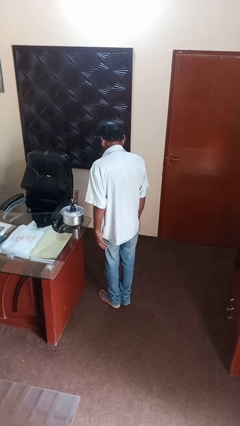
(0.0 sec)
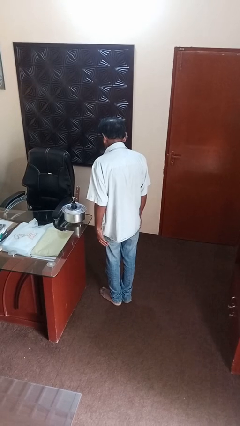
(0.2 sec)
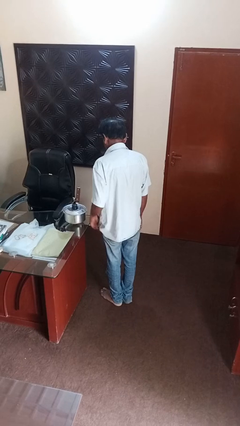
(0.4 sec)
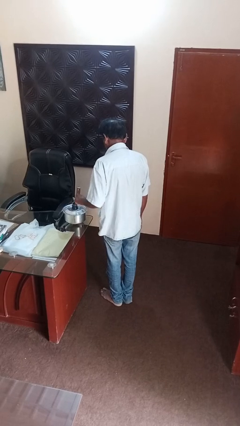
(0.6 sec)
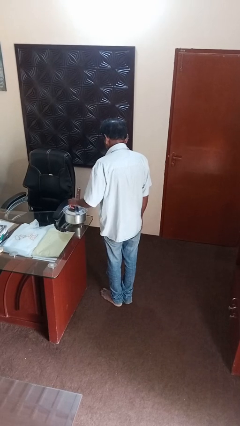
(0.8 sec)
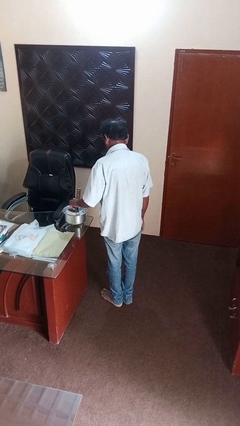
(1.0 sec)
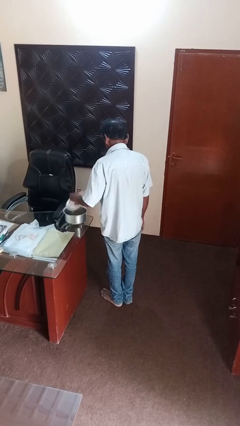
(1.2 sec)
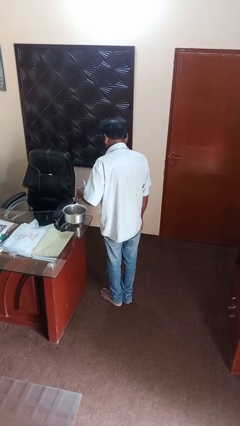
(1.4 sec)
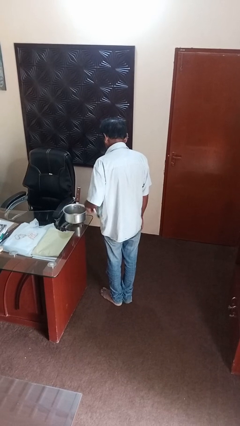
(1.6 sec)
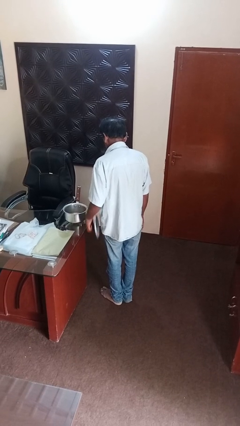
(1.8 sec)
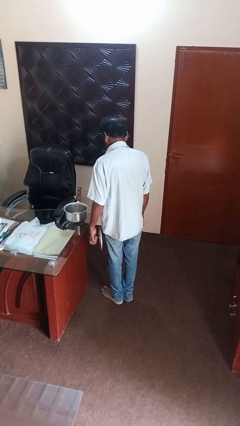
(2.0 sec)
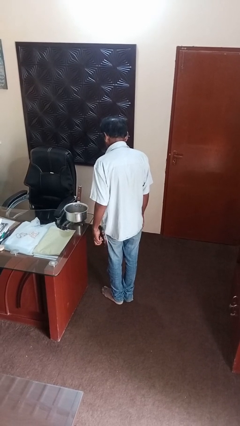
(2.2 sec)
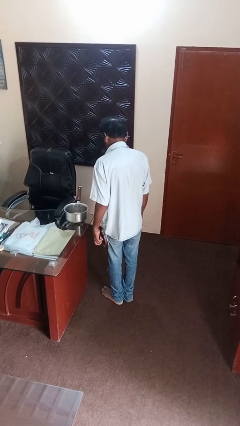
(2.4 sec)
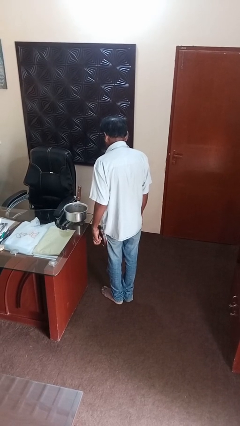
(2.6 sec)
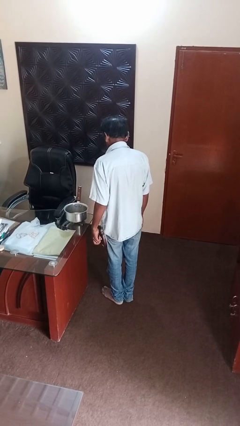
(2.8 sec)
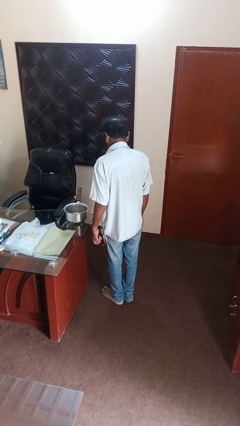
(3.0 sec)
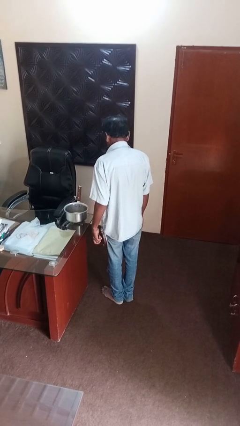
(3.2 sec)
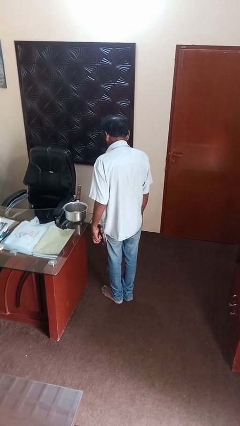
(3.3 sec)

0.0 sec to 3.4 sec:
person opens jar

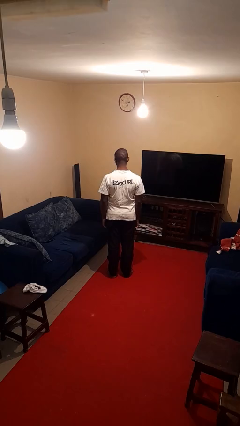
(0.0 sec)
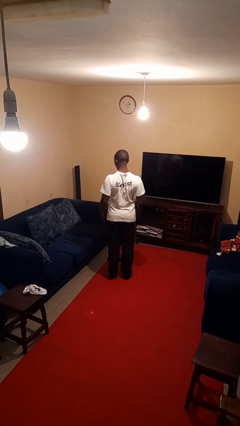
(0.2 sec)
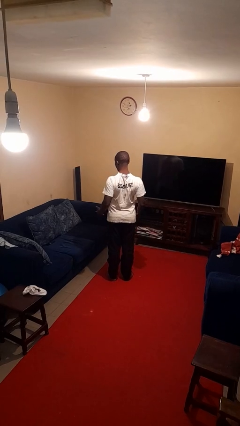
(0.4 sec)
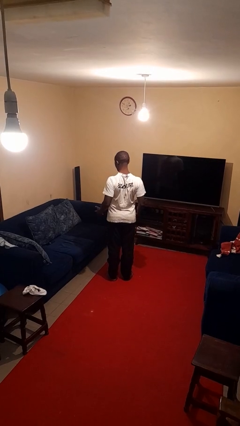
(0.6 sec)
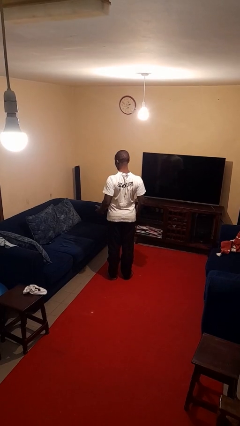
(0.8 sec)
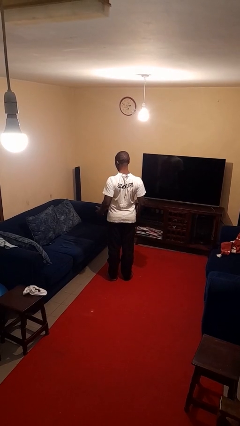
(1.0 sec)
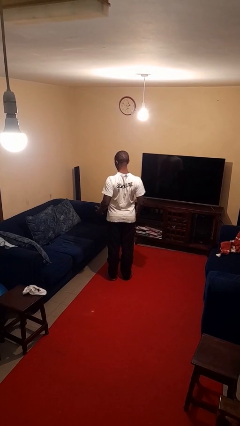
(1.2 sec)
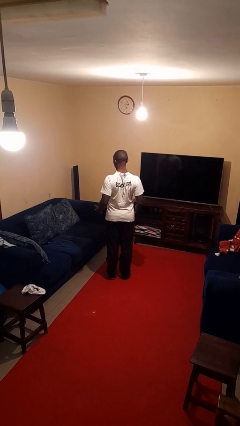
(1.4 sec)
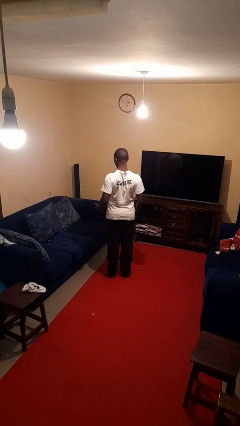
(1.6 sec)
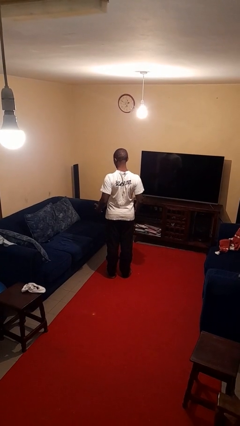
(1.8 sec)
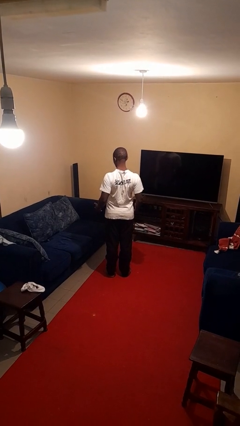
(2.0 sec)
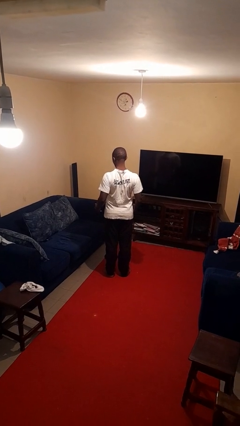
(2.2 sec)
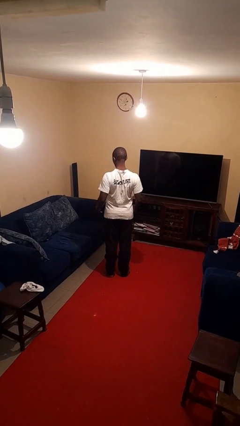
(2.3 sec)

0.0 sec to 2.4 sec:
person shrugs

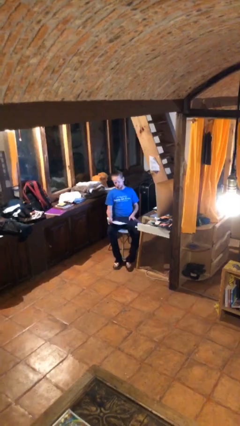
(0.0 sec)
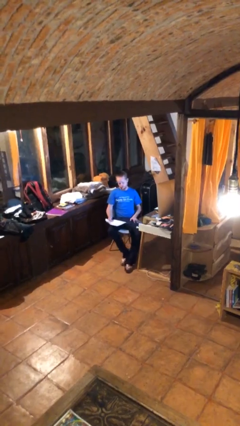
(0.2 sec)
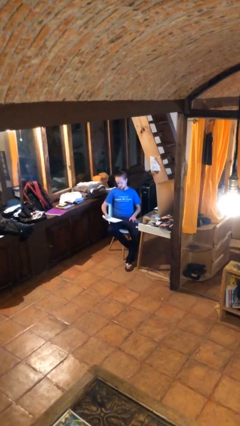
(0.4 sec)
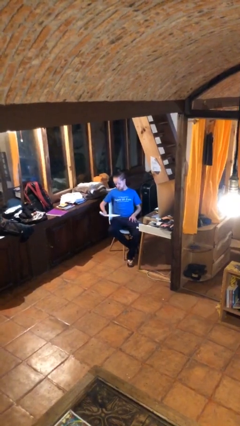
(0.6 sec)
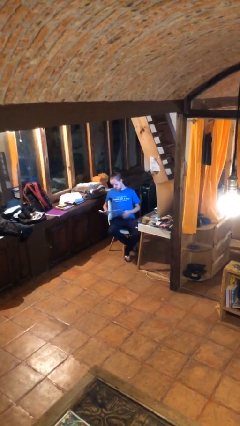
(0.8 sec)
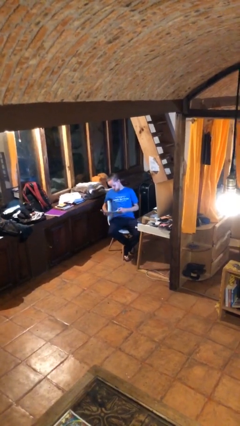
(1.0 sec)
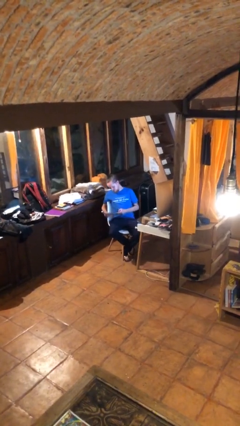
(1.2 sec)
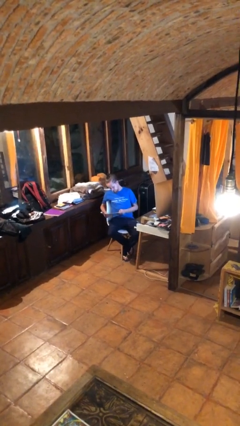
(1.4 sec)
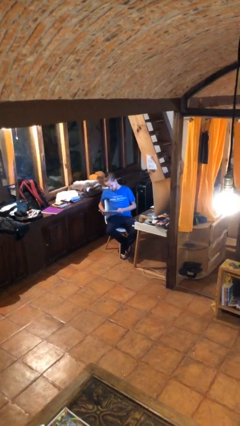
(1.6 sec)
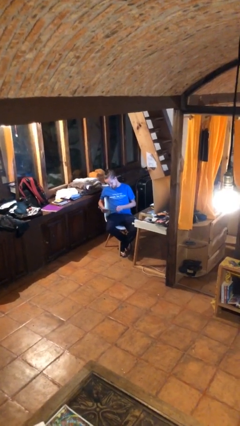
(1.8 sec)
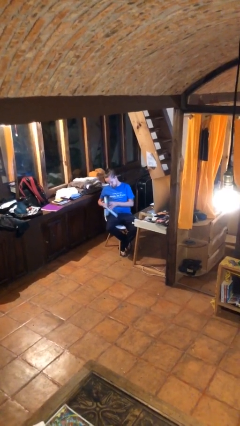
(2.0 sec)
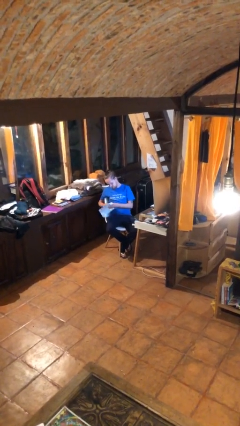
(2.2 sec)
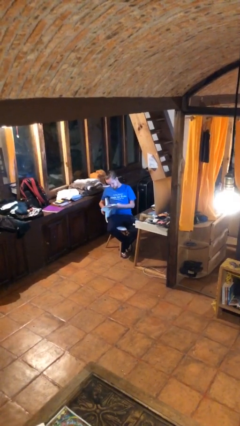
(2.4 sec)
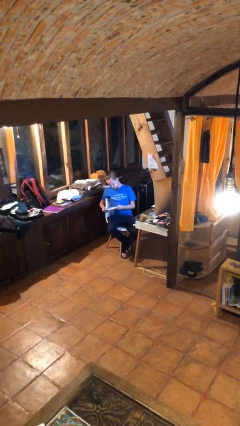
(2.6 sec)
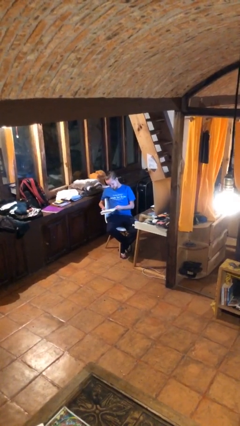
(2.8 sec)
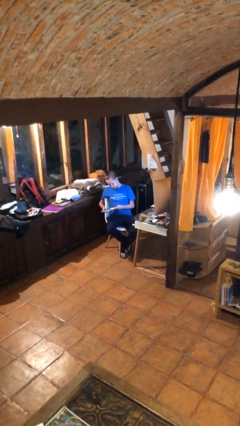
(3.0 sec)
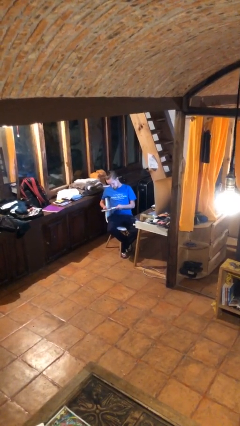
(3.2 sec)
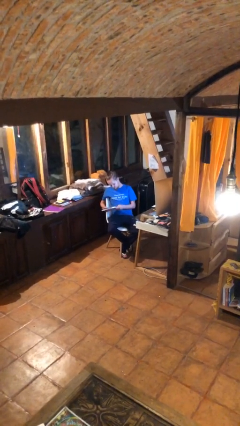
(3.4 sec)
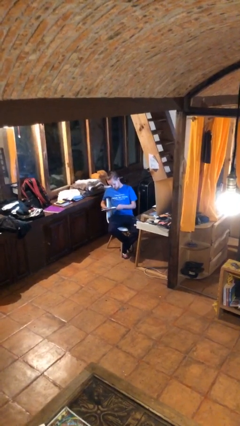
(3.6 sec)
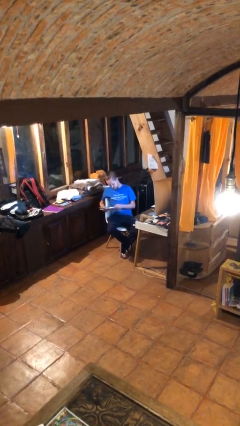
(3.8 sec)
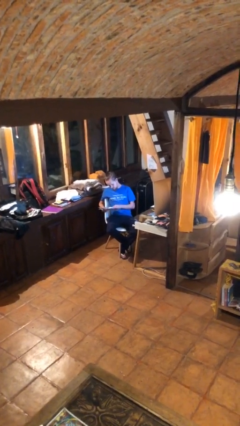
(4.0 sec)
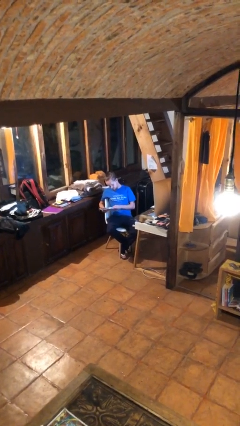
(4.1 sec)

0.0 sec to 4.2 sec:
person reads document

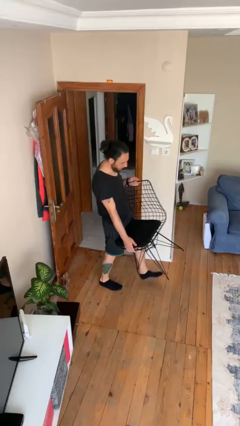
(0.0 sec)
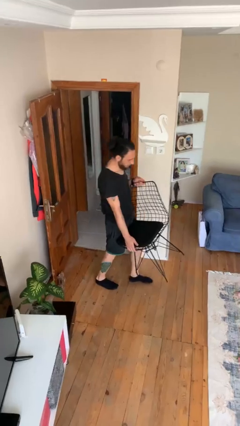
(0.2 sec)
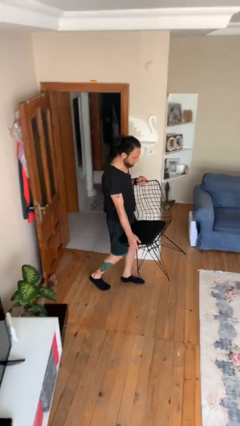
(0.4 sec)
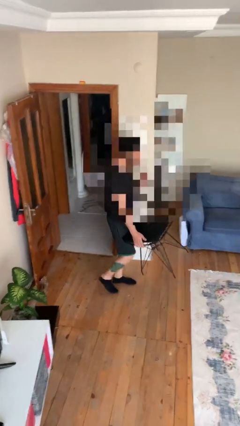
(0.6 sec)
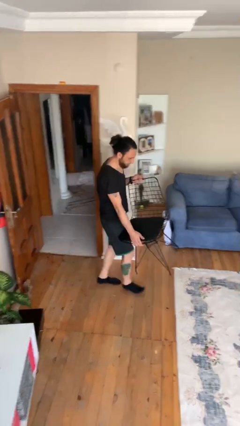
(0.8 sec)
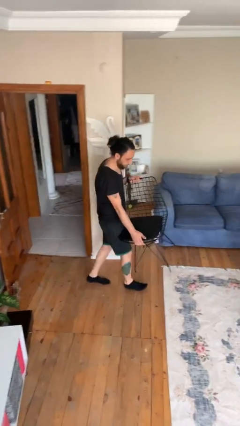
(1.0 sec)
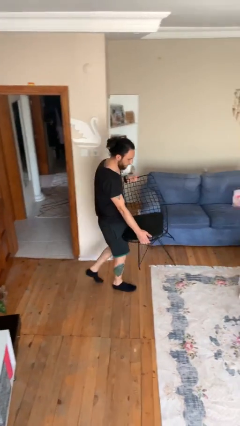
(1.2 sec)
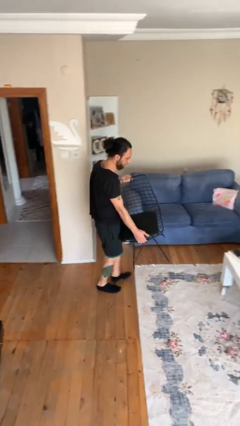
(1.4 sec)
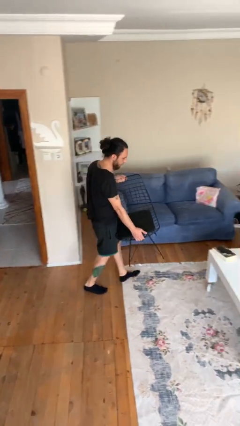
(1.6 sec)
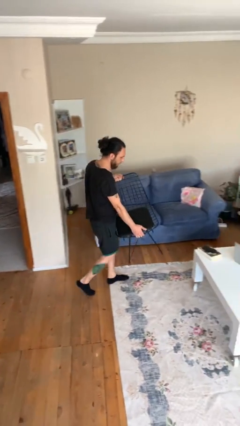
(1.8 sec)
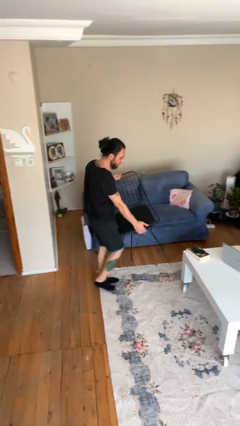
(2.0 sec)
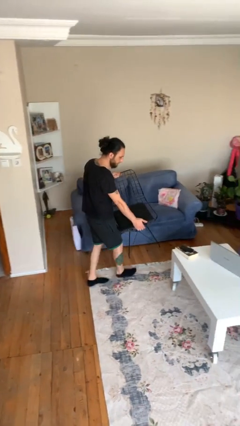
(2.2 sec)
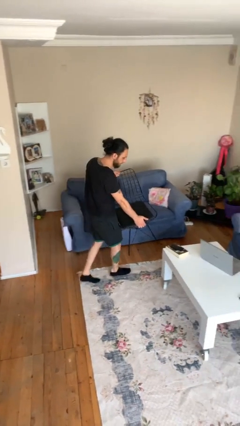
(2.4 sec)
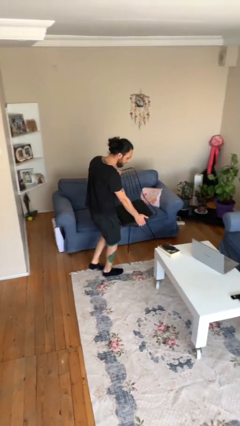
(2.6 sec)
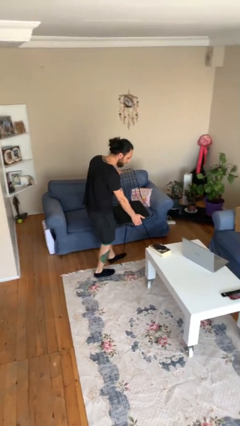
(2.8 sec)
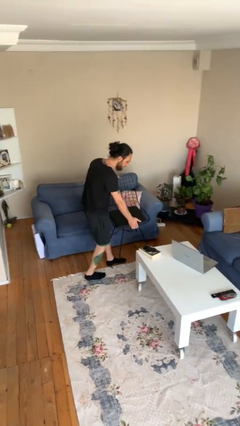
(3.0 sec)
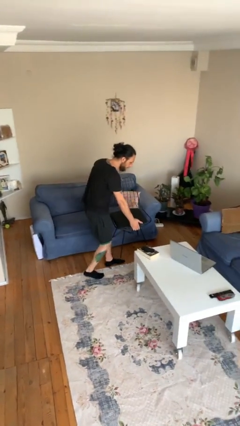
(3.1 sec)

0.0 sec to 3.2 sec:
person carries heavy object

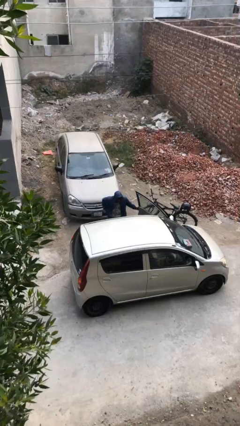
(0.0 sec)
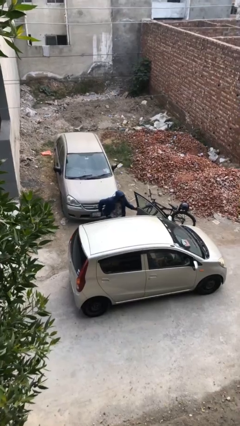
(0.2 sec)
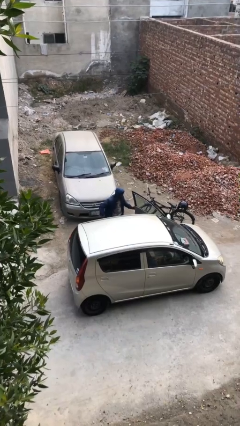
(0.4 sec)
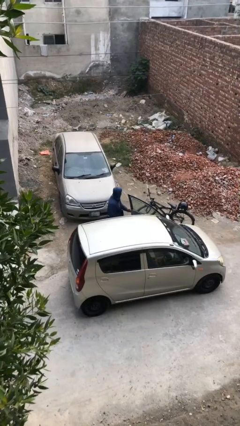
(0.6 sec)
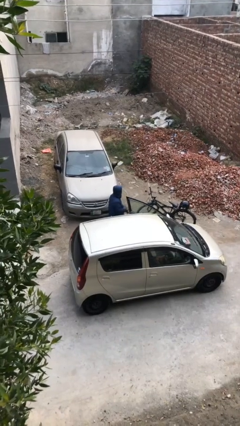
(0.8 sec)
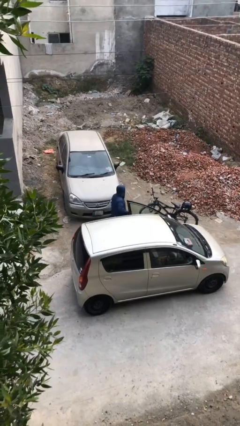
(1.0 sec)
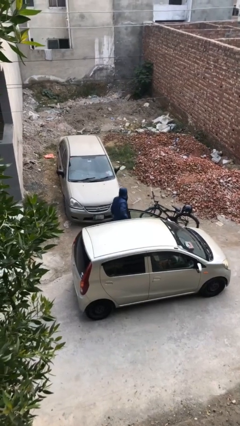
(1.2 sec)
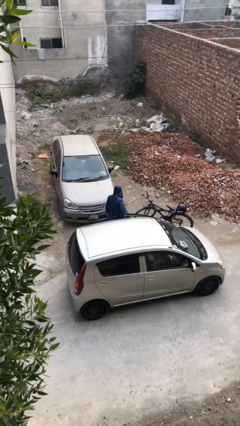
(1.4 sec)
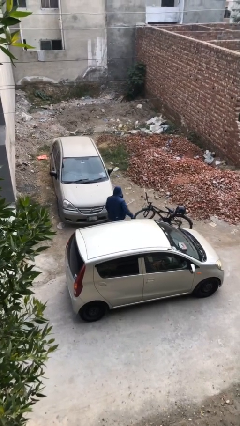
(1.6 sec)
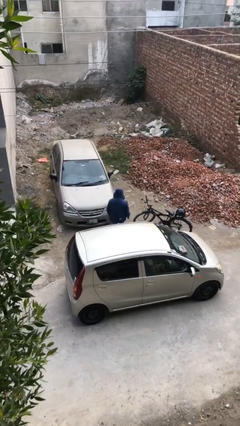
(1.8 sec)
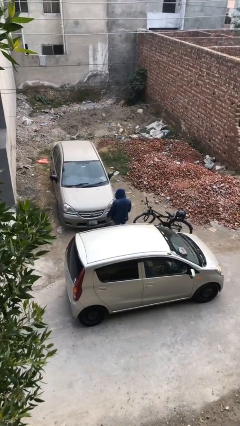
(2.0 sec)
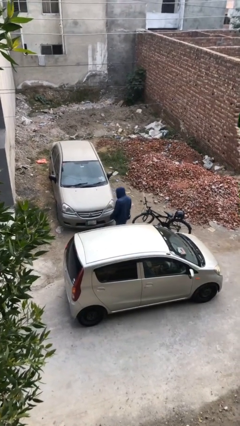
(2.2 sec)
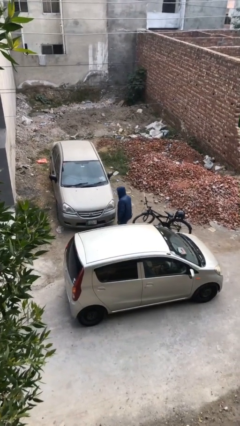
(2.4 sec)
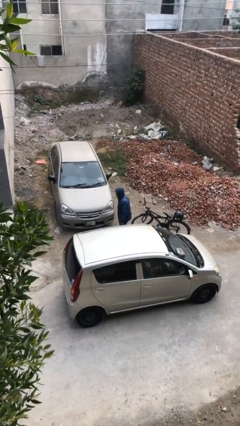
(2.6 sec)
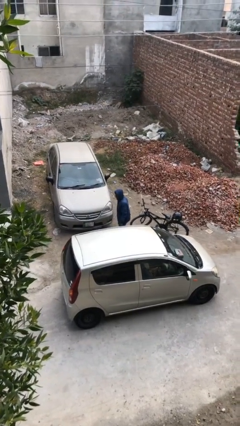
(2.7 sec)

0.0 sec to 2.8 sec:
person closes car door

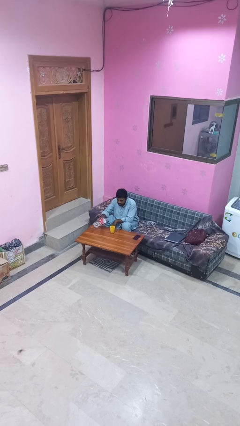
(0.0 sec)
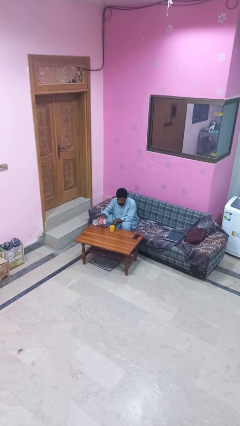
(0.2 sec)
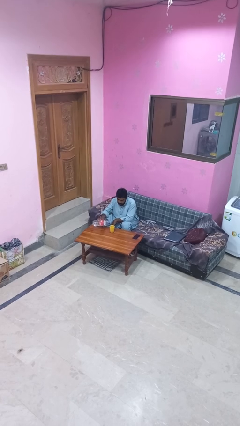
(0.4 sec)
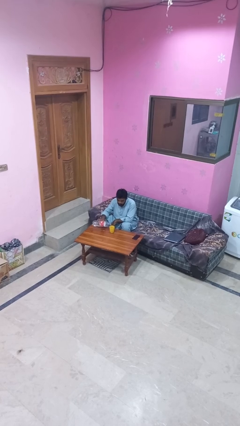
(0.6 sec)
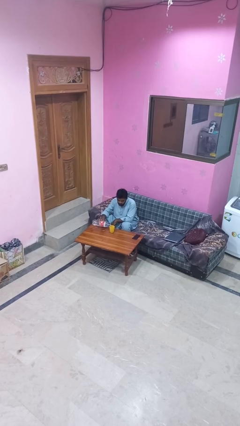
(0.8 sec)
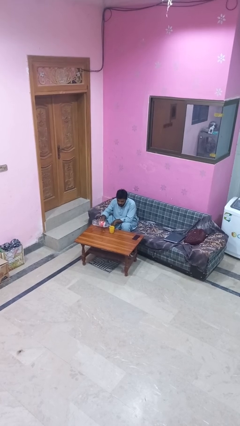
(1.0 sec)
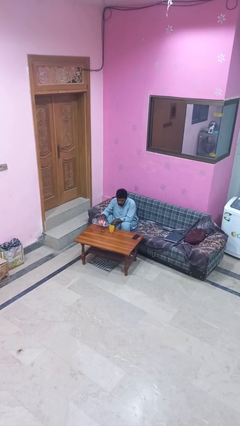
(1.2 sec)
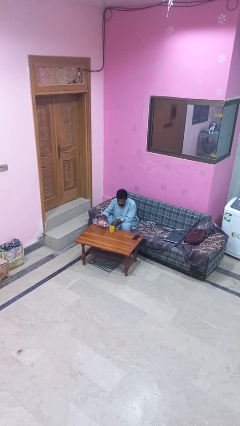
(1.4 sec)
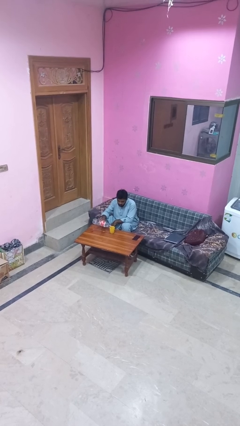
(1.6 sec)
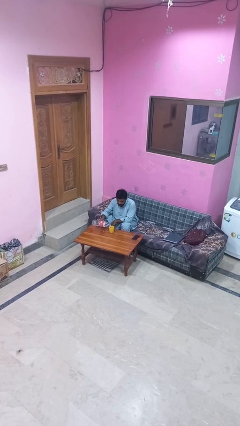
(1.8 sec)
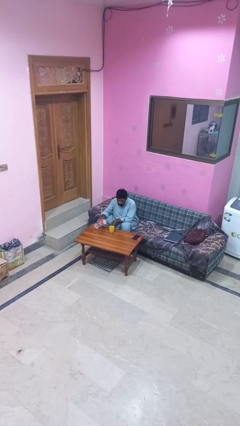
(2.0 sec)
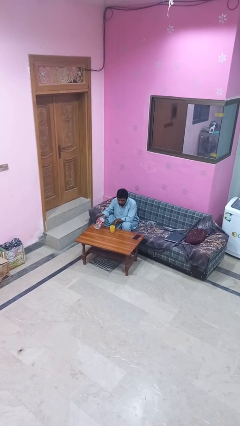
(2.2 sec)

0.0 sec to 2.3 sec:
person pours liquid into cup
